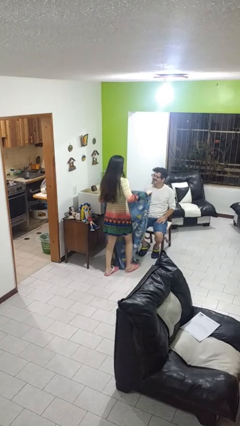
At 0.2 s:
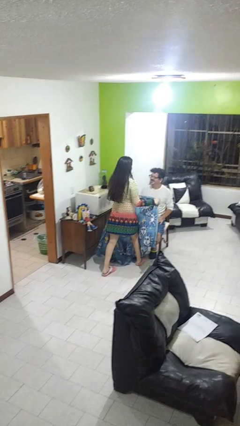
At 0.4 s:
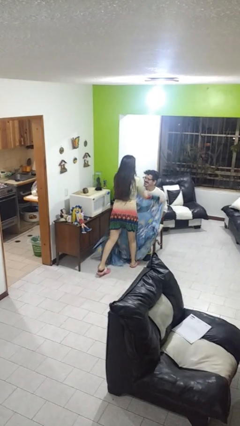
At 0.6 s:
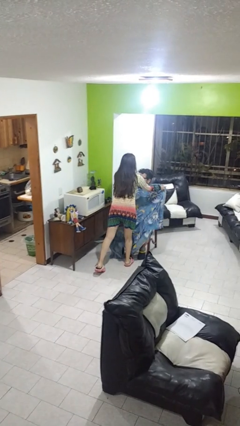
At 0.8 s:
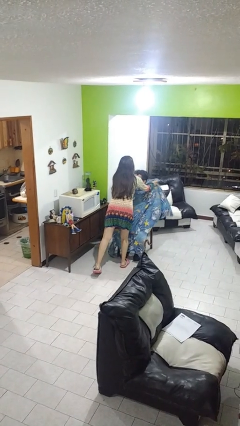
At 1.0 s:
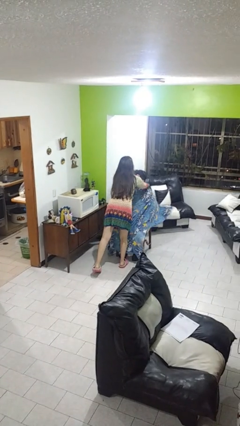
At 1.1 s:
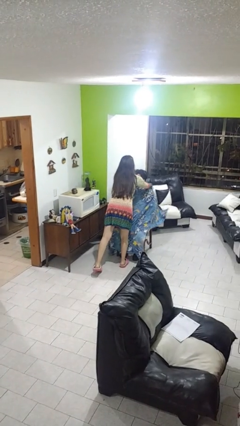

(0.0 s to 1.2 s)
person covers friend with blanket

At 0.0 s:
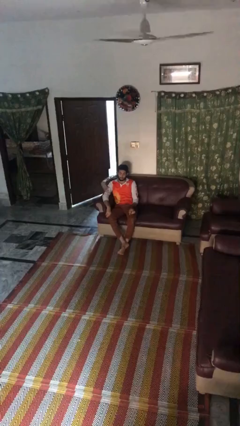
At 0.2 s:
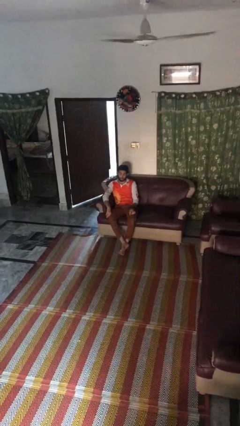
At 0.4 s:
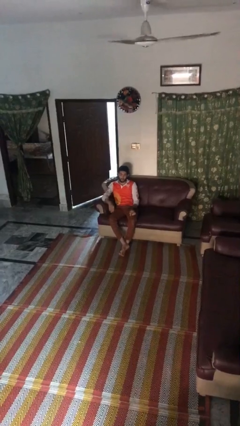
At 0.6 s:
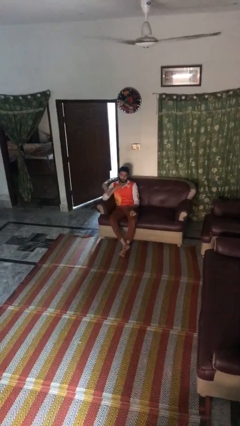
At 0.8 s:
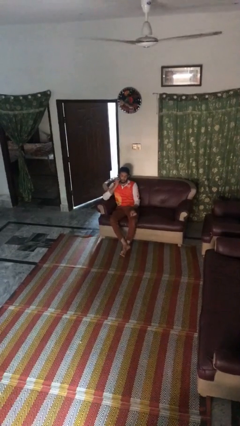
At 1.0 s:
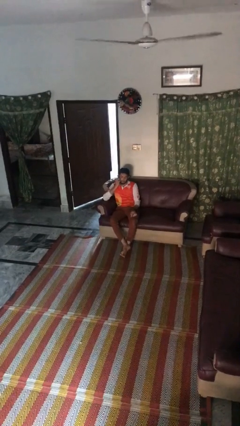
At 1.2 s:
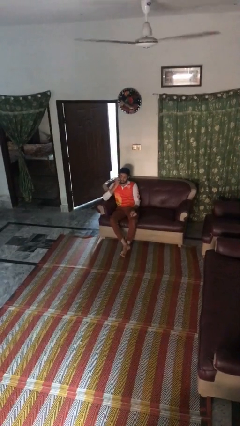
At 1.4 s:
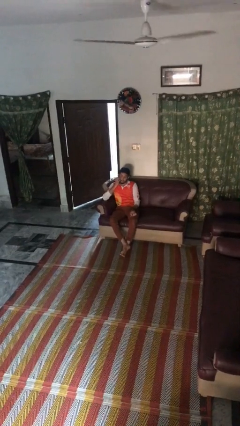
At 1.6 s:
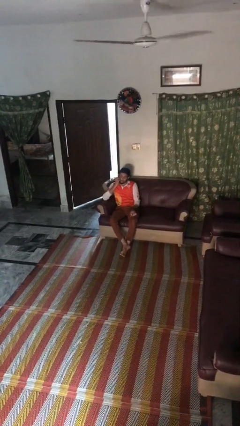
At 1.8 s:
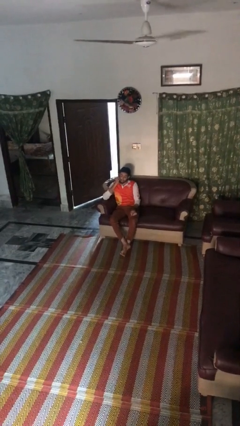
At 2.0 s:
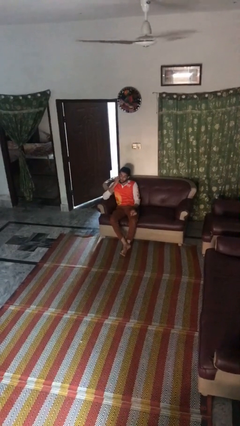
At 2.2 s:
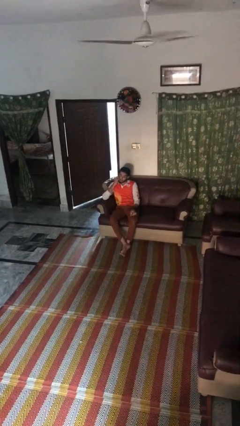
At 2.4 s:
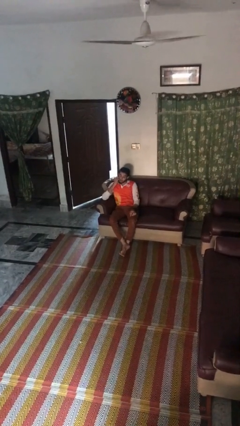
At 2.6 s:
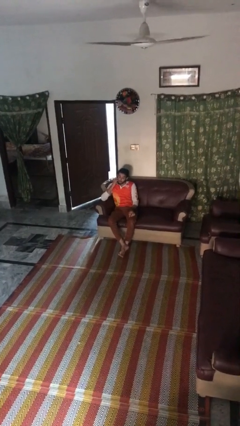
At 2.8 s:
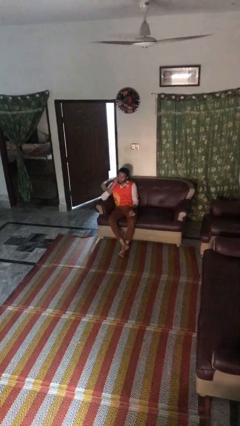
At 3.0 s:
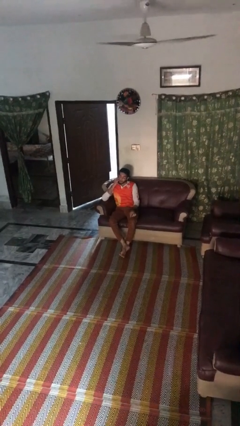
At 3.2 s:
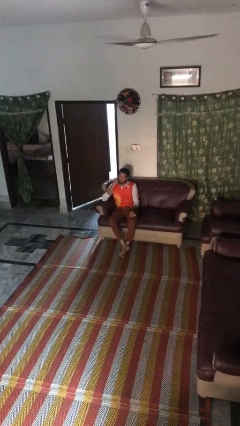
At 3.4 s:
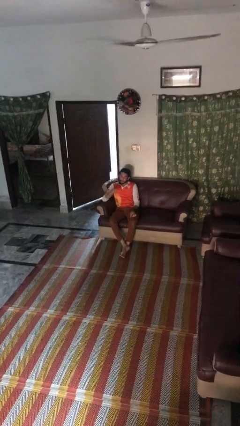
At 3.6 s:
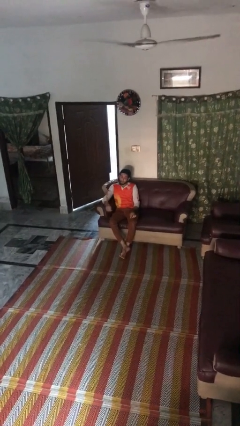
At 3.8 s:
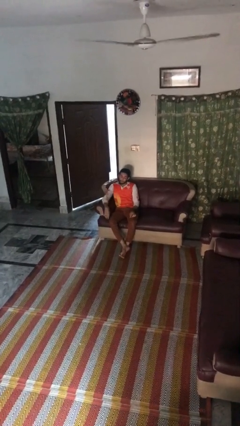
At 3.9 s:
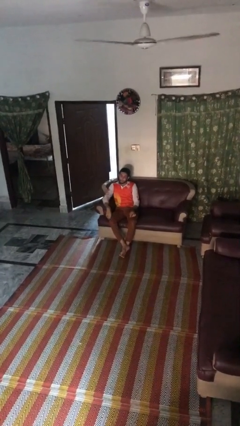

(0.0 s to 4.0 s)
person scratches face

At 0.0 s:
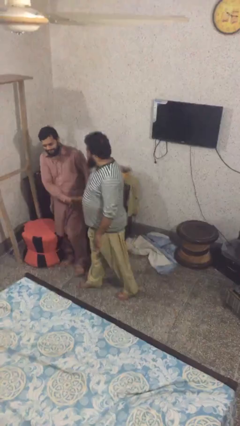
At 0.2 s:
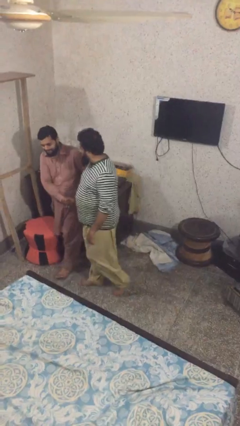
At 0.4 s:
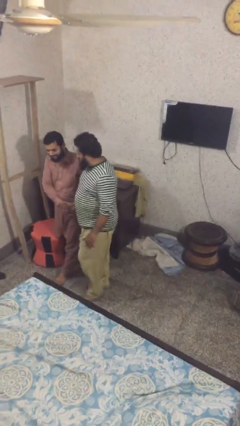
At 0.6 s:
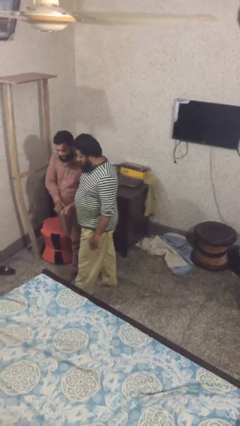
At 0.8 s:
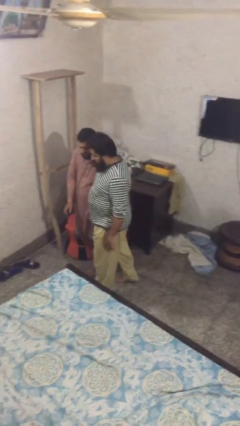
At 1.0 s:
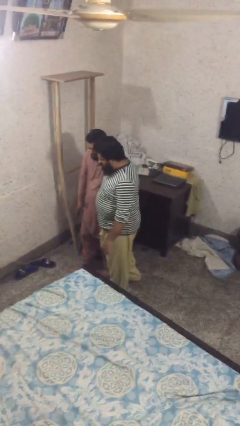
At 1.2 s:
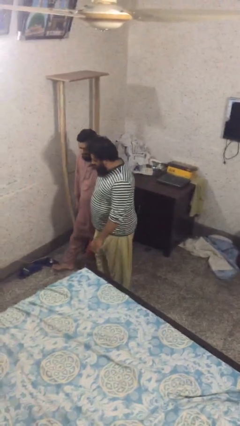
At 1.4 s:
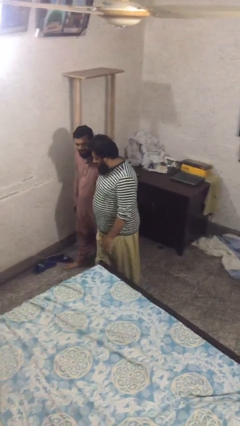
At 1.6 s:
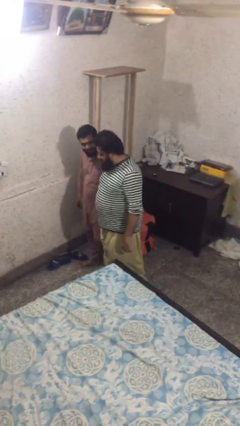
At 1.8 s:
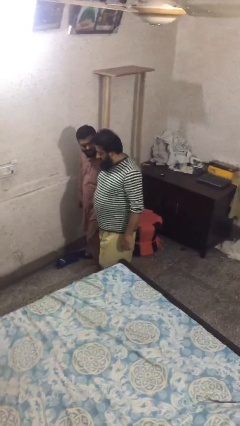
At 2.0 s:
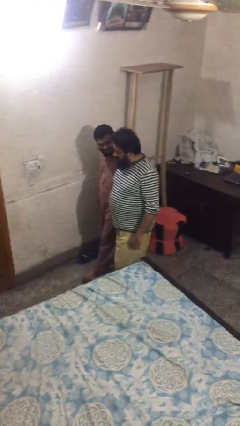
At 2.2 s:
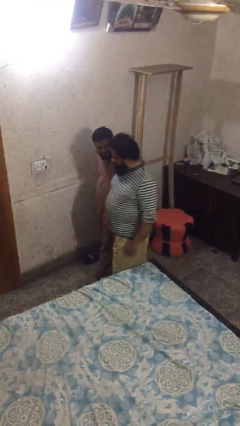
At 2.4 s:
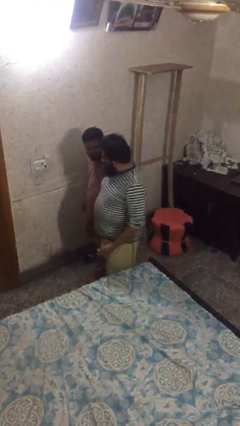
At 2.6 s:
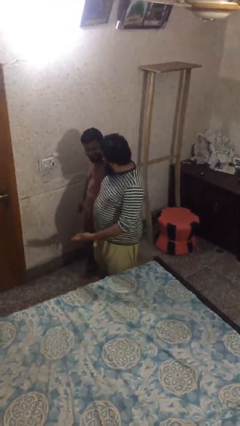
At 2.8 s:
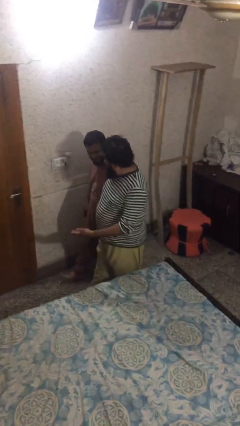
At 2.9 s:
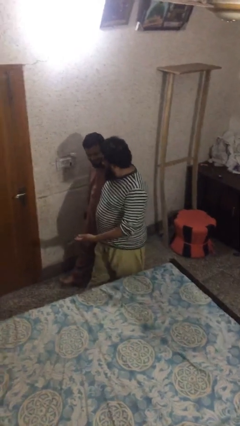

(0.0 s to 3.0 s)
person talks to person

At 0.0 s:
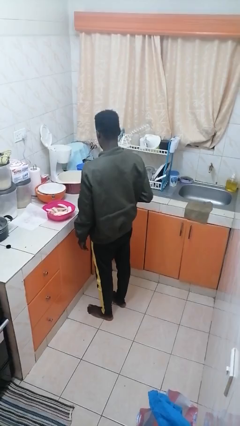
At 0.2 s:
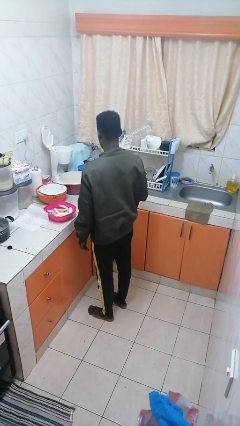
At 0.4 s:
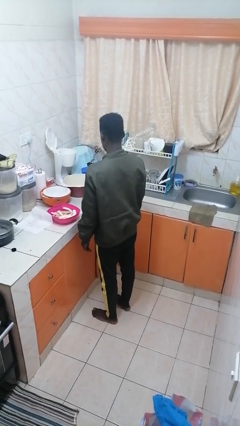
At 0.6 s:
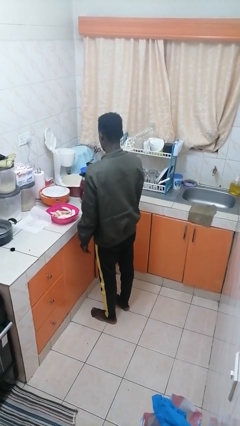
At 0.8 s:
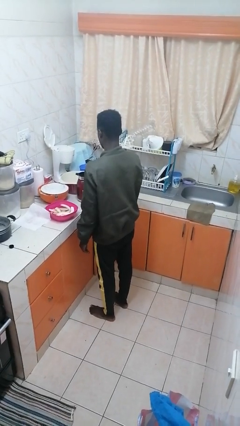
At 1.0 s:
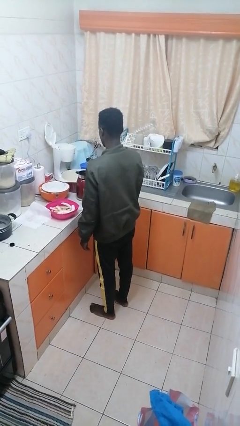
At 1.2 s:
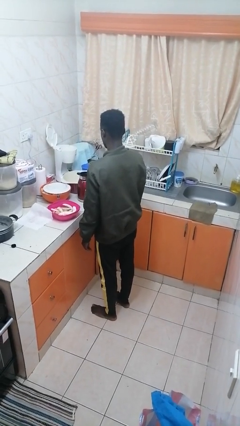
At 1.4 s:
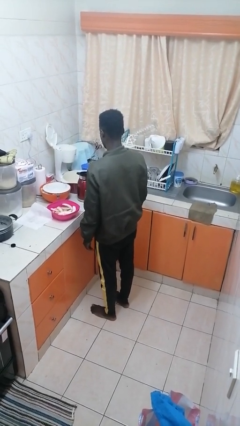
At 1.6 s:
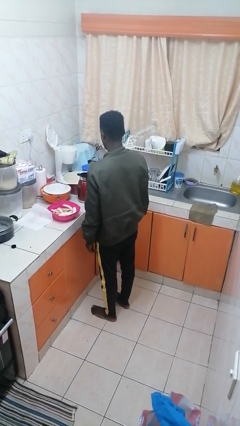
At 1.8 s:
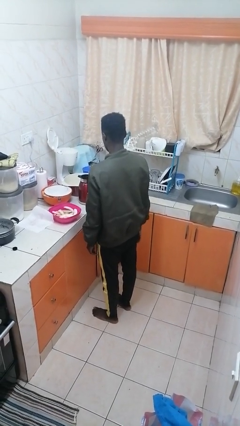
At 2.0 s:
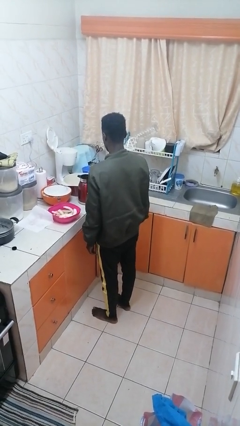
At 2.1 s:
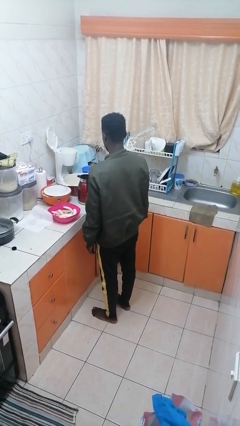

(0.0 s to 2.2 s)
person puts down object on countertop

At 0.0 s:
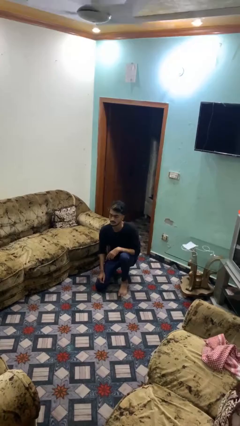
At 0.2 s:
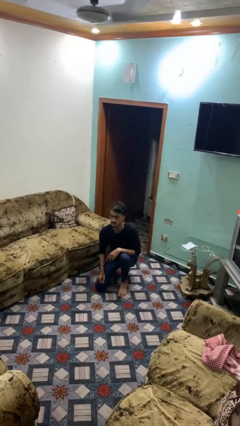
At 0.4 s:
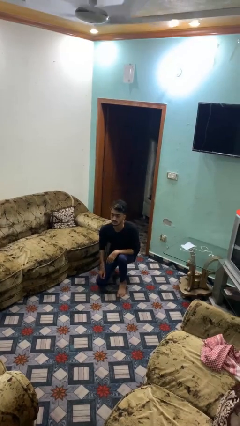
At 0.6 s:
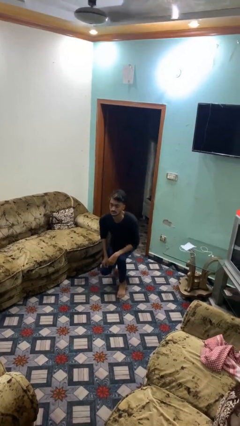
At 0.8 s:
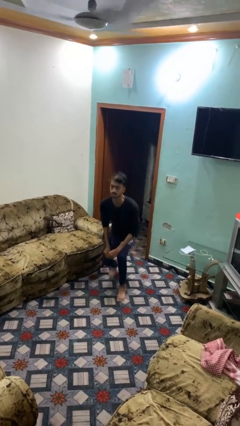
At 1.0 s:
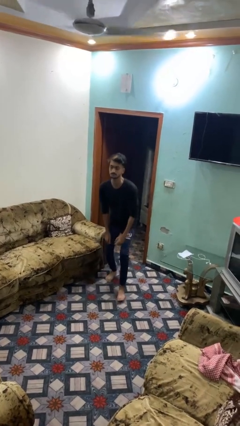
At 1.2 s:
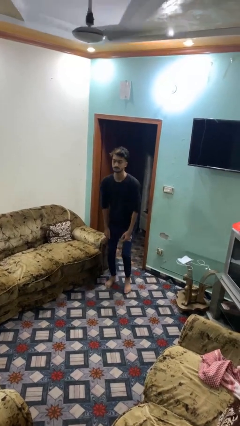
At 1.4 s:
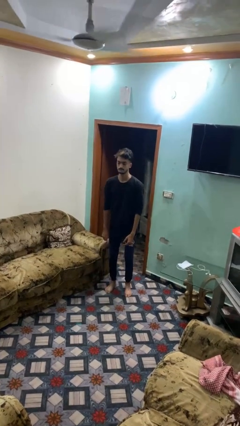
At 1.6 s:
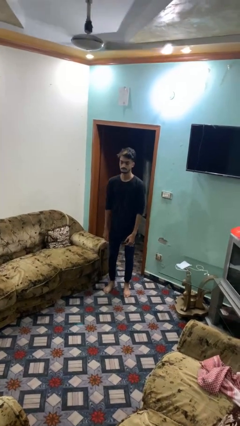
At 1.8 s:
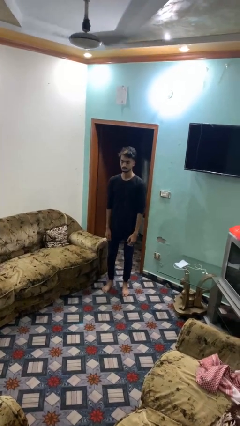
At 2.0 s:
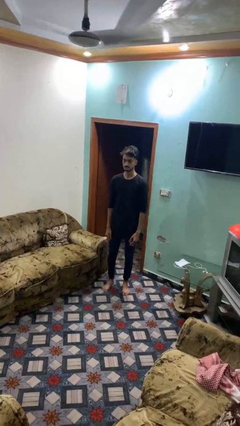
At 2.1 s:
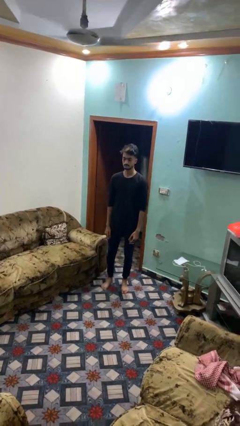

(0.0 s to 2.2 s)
person stands up from floor

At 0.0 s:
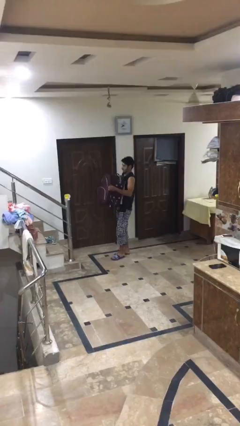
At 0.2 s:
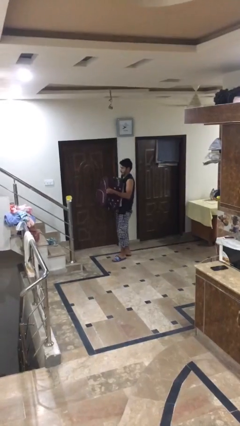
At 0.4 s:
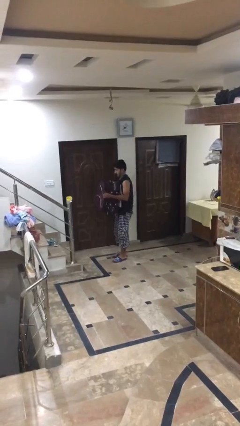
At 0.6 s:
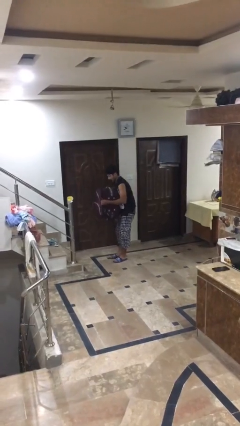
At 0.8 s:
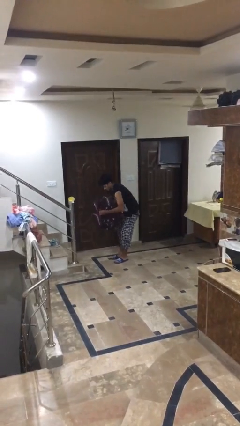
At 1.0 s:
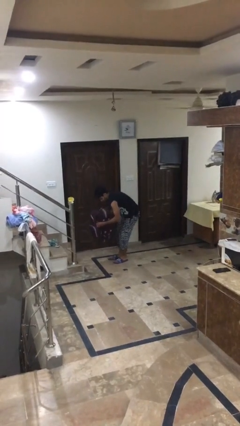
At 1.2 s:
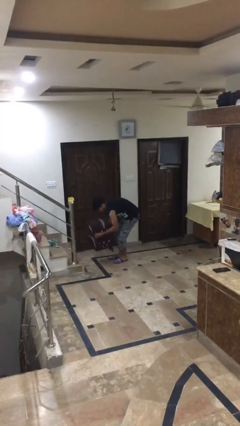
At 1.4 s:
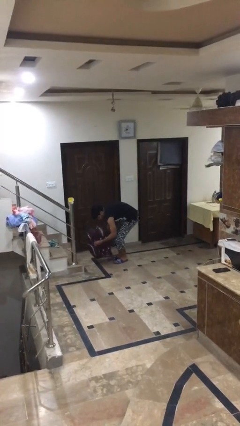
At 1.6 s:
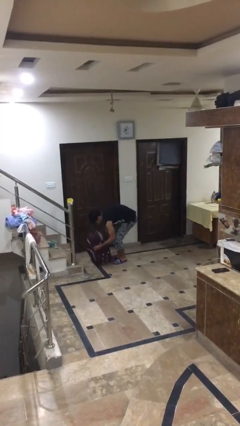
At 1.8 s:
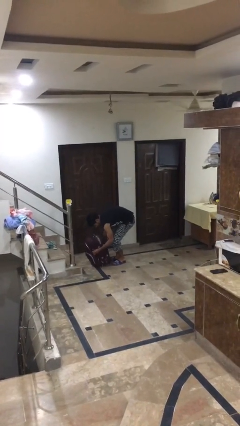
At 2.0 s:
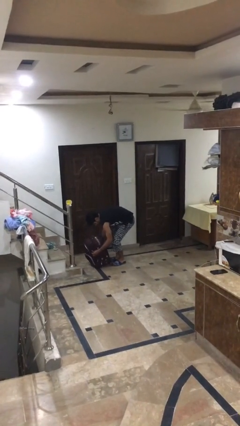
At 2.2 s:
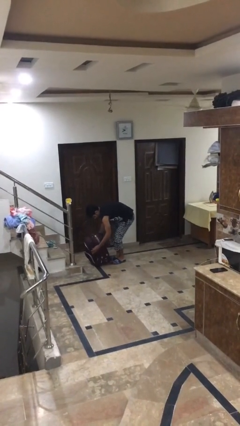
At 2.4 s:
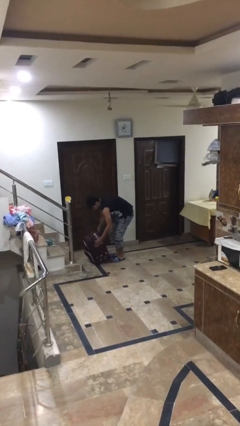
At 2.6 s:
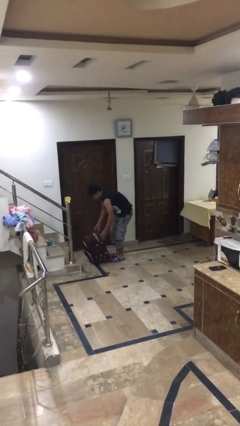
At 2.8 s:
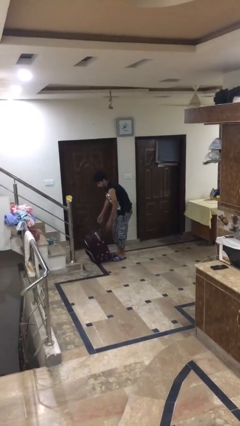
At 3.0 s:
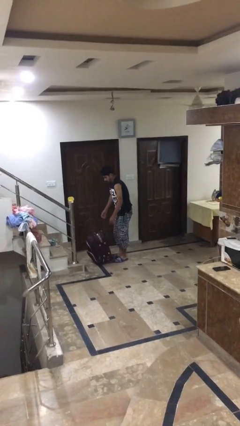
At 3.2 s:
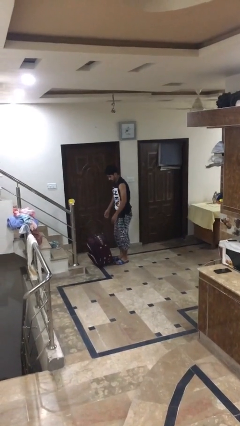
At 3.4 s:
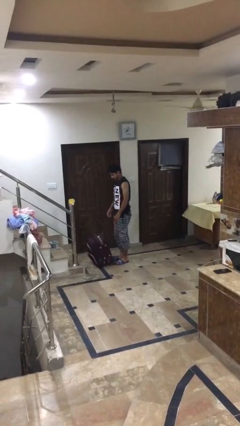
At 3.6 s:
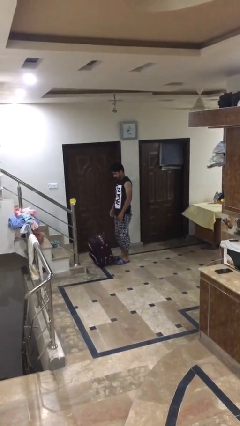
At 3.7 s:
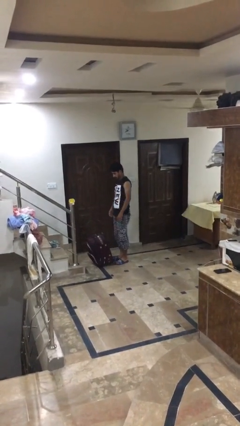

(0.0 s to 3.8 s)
person puts down object on floor

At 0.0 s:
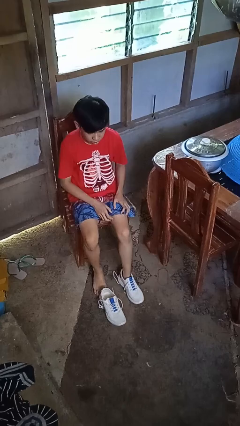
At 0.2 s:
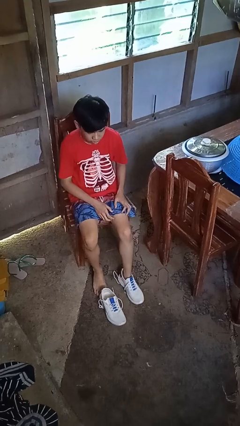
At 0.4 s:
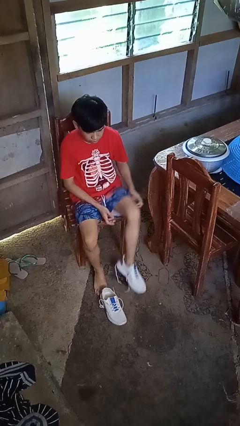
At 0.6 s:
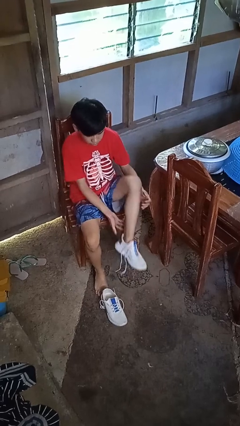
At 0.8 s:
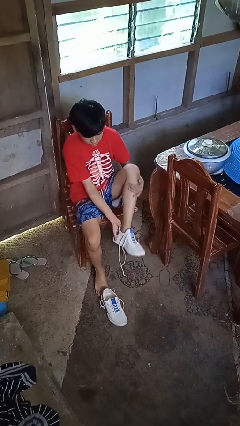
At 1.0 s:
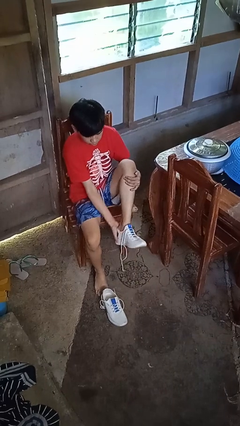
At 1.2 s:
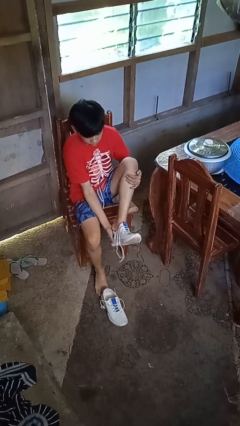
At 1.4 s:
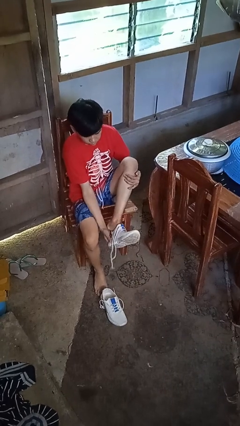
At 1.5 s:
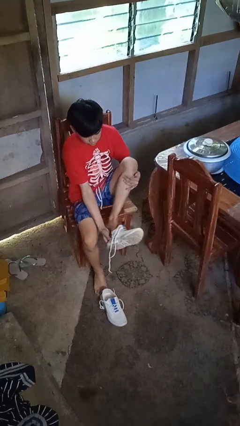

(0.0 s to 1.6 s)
person takes off shoes
